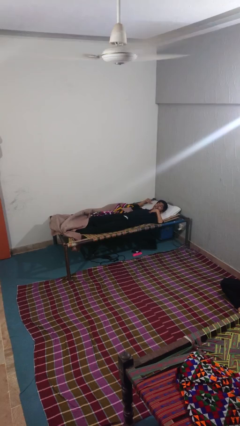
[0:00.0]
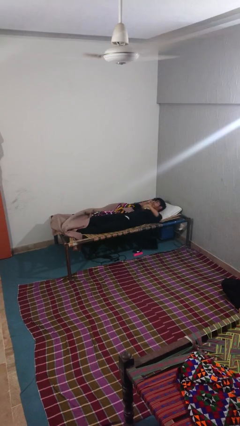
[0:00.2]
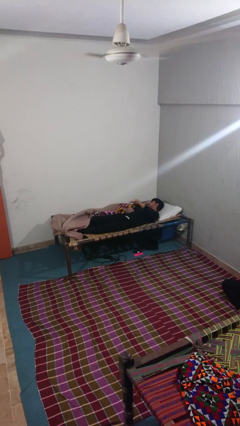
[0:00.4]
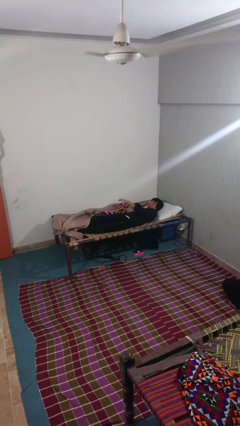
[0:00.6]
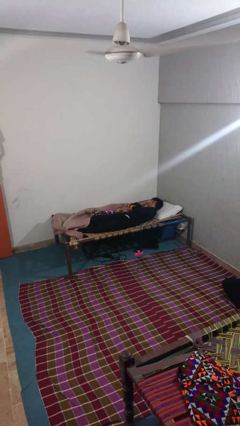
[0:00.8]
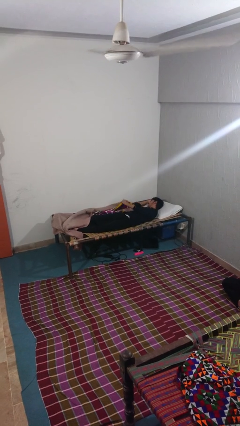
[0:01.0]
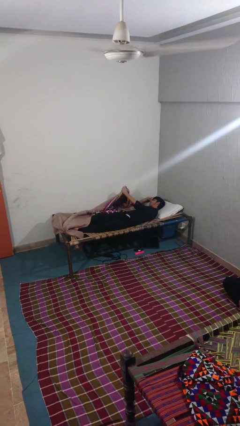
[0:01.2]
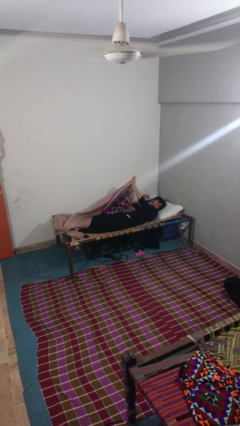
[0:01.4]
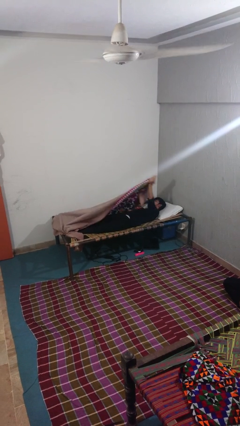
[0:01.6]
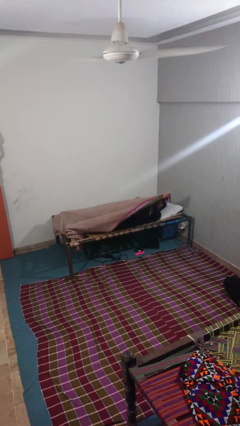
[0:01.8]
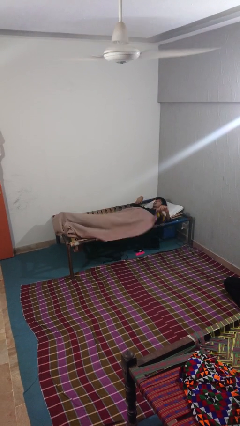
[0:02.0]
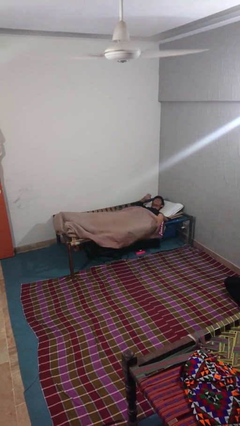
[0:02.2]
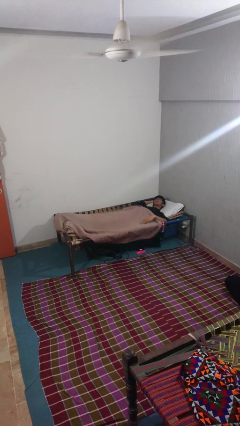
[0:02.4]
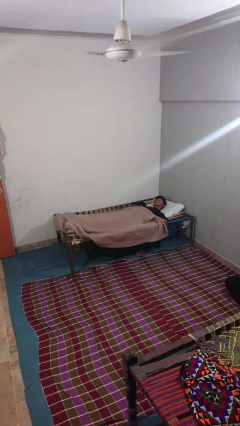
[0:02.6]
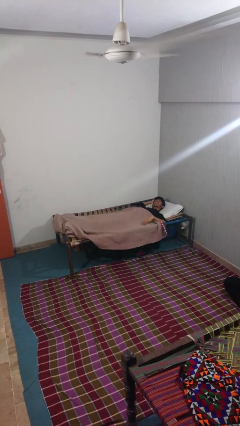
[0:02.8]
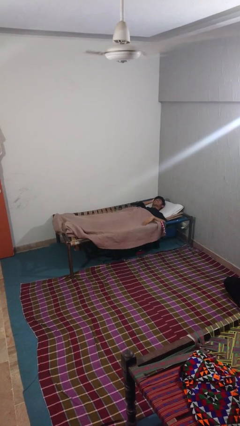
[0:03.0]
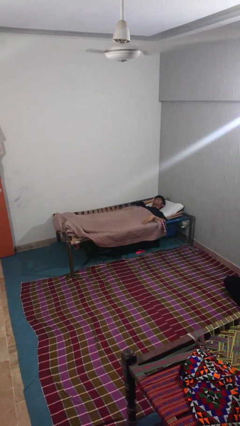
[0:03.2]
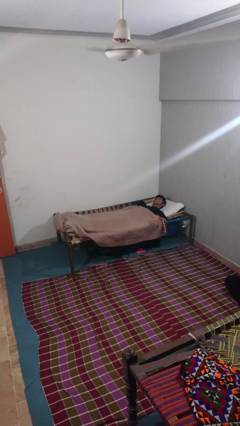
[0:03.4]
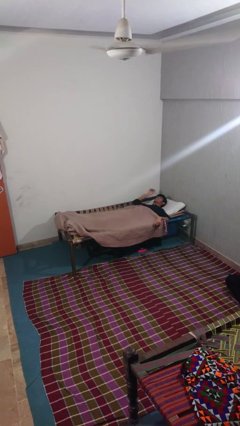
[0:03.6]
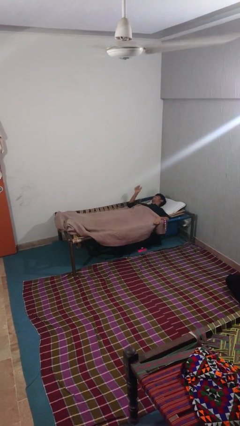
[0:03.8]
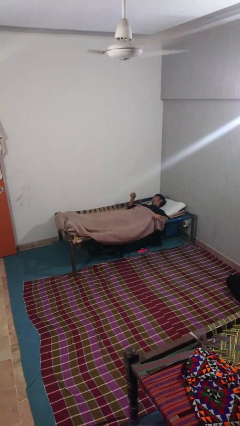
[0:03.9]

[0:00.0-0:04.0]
person covers with blanket

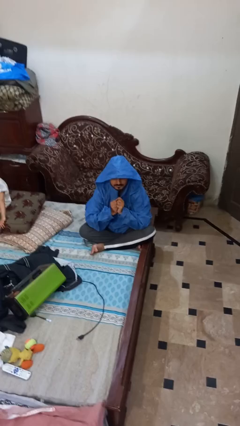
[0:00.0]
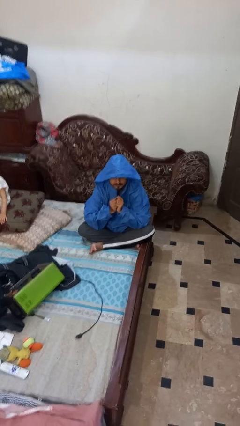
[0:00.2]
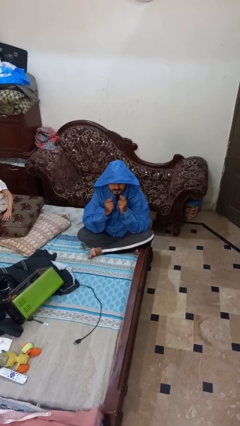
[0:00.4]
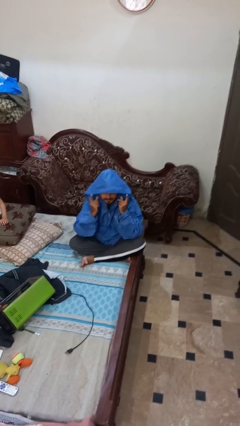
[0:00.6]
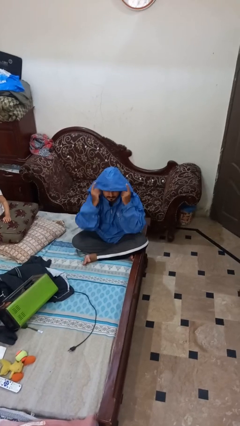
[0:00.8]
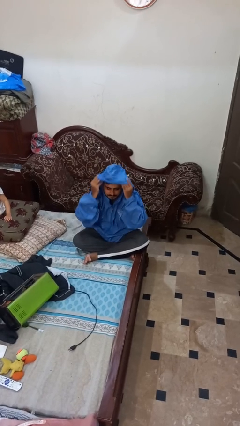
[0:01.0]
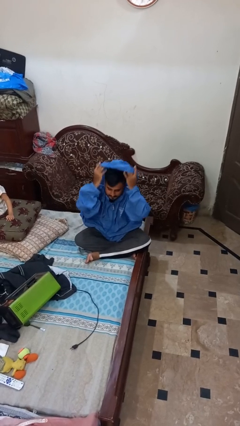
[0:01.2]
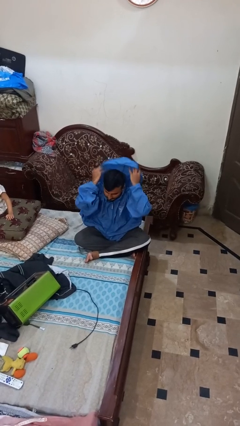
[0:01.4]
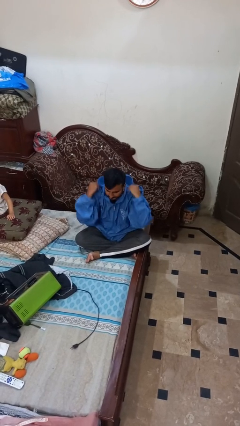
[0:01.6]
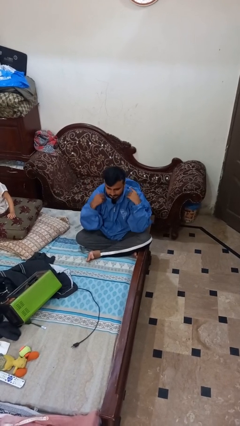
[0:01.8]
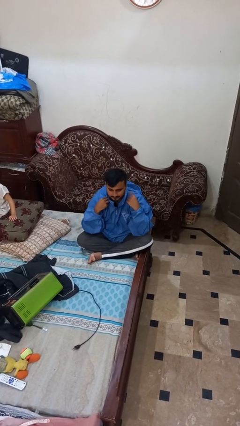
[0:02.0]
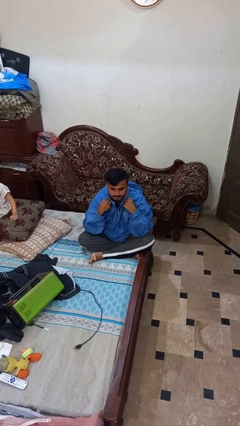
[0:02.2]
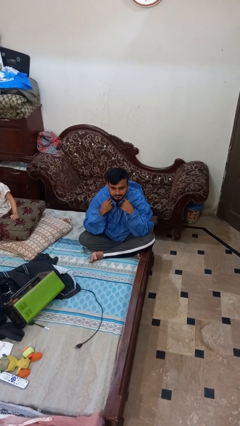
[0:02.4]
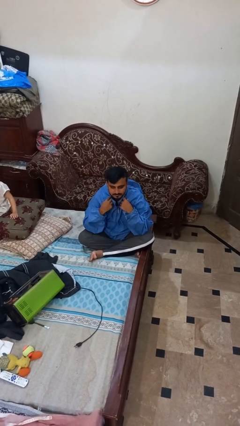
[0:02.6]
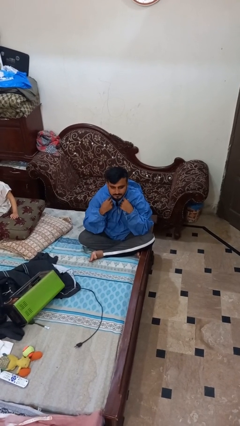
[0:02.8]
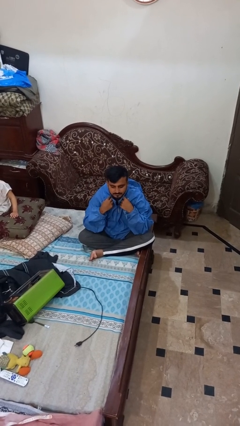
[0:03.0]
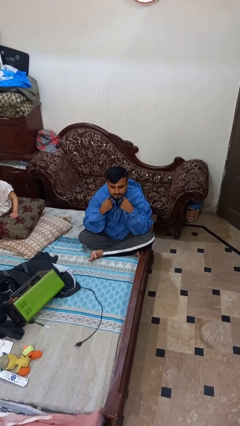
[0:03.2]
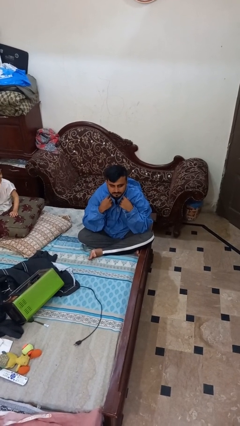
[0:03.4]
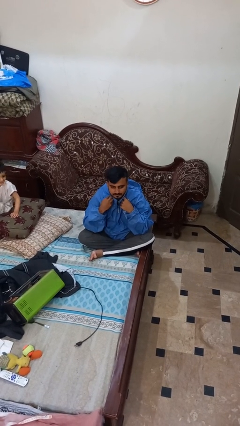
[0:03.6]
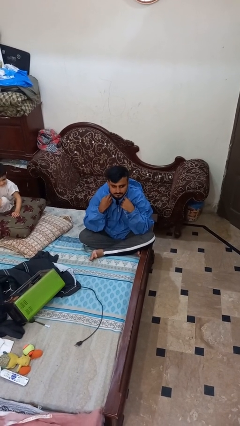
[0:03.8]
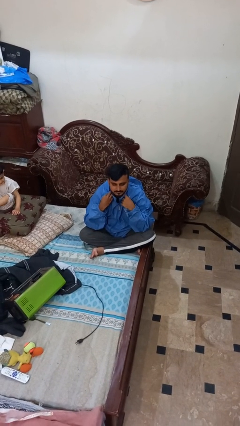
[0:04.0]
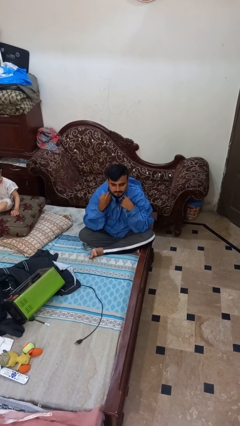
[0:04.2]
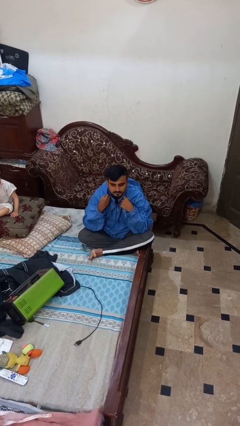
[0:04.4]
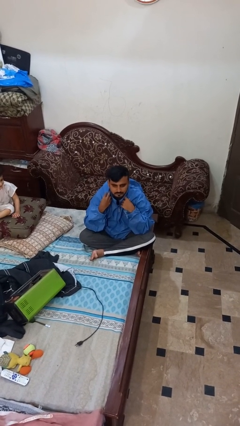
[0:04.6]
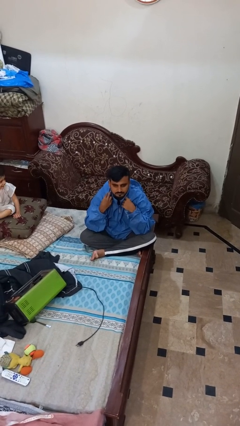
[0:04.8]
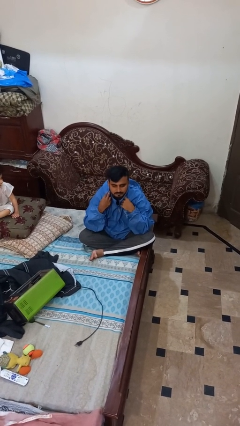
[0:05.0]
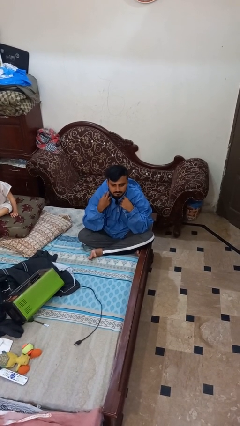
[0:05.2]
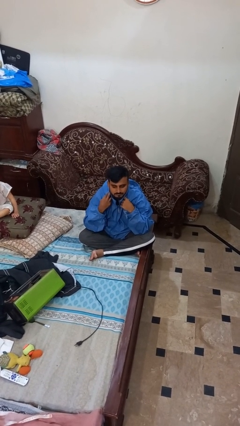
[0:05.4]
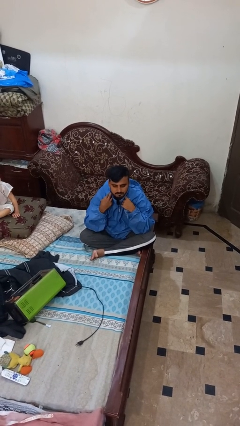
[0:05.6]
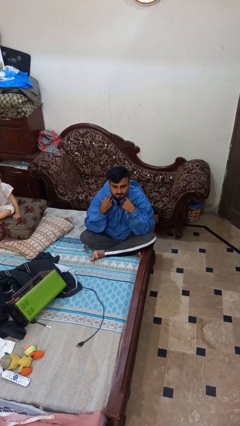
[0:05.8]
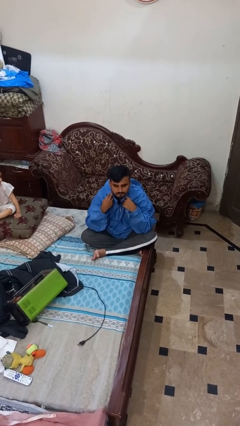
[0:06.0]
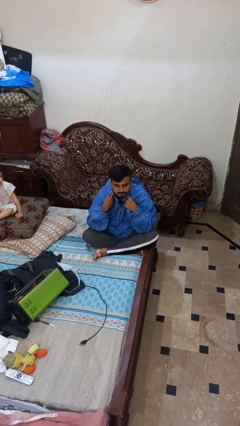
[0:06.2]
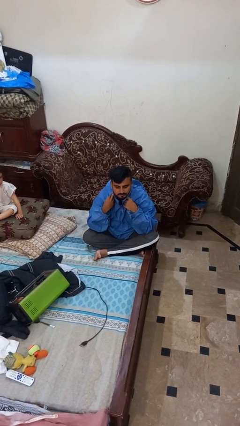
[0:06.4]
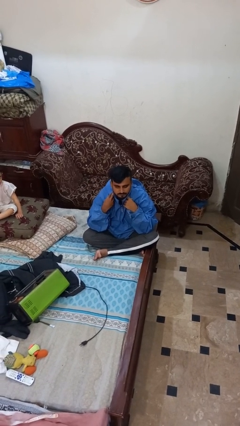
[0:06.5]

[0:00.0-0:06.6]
person takes off hoodie

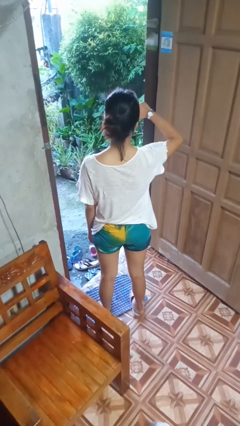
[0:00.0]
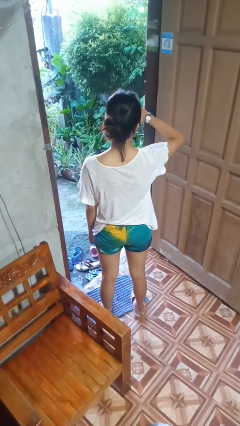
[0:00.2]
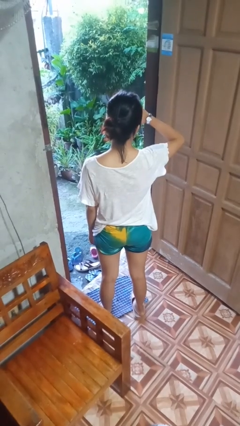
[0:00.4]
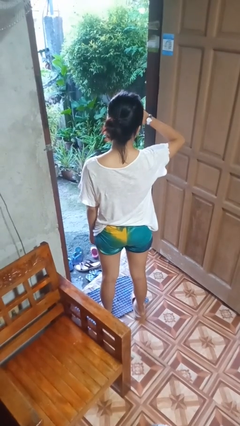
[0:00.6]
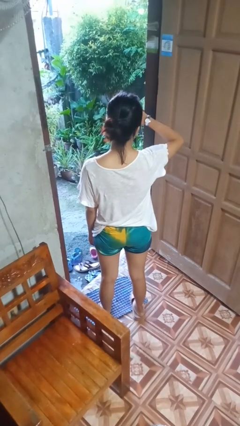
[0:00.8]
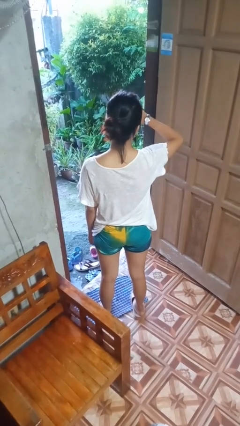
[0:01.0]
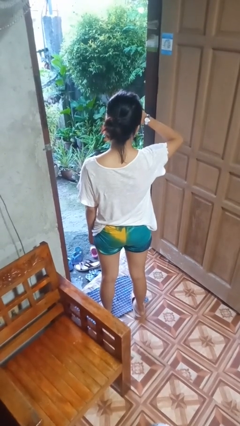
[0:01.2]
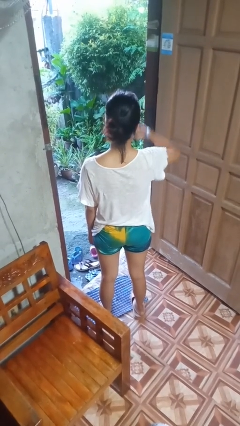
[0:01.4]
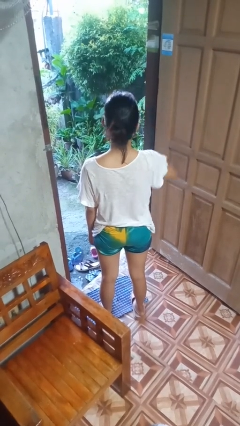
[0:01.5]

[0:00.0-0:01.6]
person looks at wristwatch

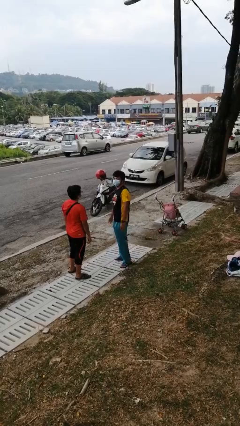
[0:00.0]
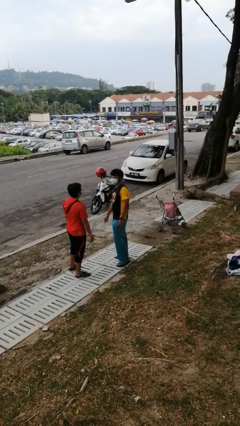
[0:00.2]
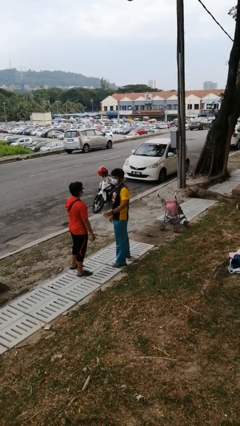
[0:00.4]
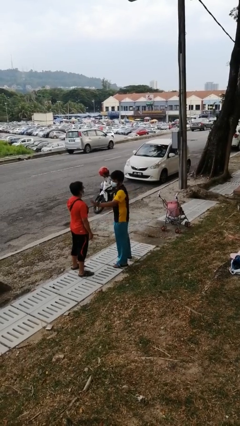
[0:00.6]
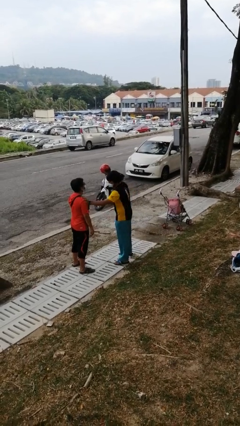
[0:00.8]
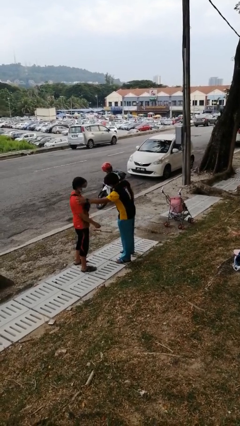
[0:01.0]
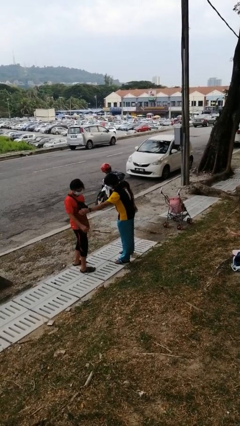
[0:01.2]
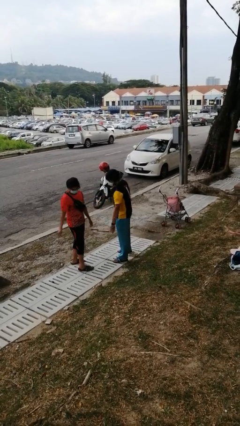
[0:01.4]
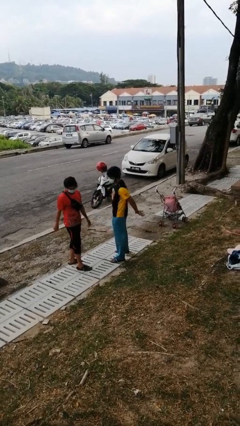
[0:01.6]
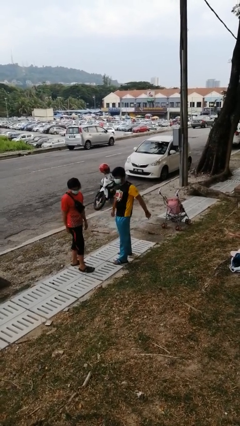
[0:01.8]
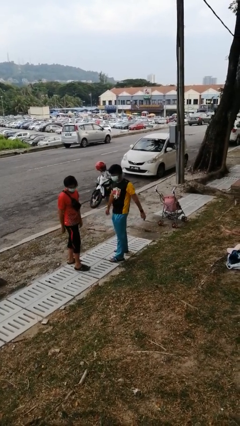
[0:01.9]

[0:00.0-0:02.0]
person shoves person

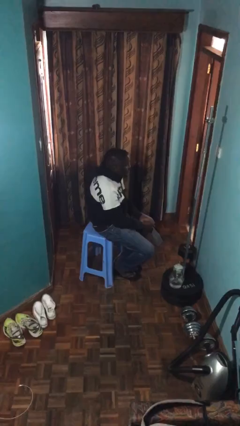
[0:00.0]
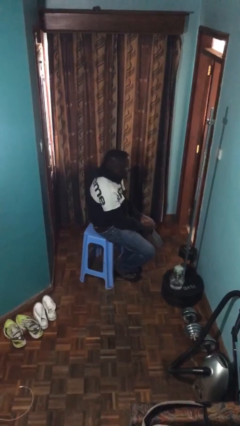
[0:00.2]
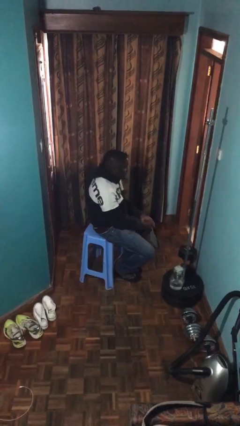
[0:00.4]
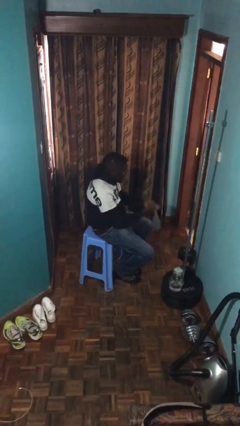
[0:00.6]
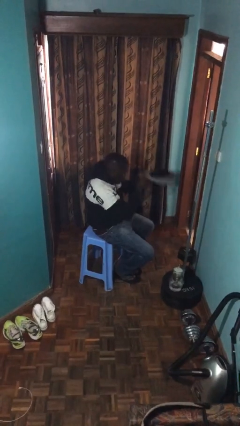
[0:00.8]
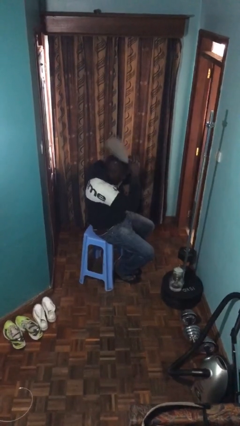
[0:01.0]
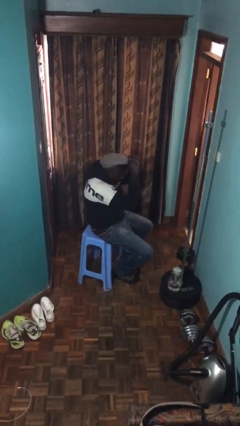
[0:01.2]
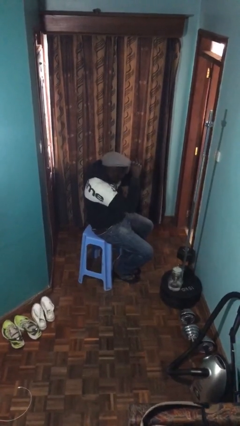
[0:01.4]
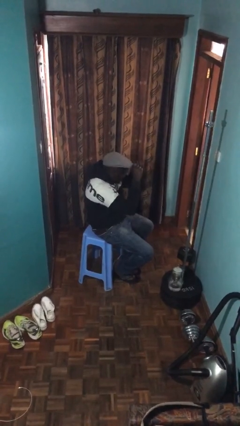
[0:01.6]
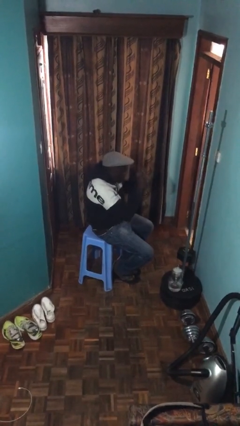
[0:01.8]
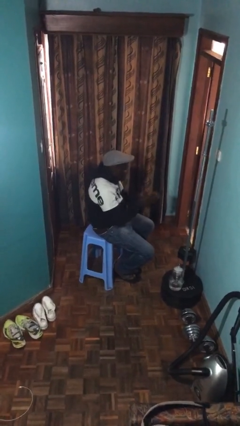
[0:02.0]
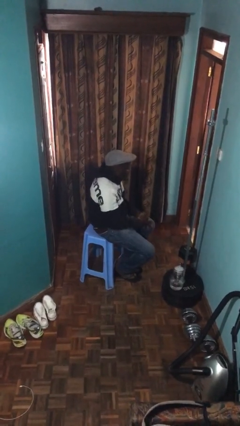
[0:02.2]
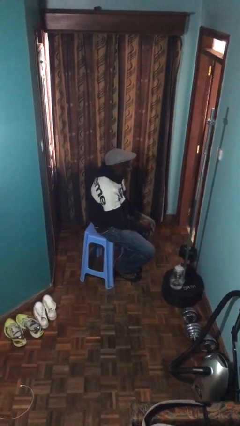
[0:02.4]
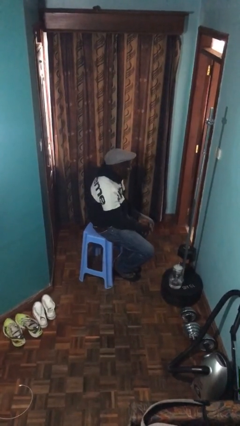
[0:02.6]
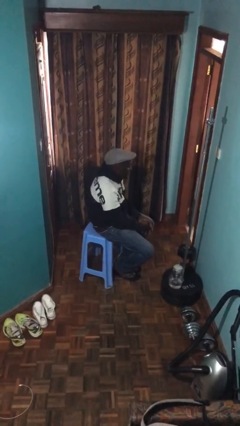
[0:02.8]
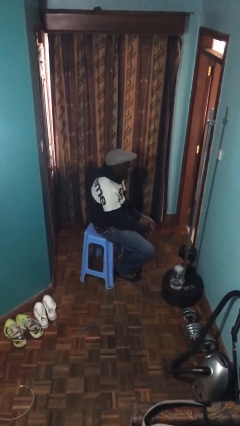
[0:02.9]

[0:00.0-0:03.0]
person puts on hat
